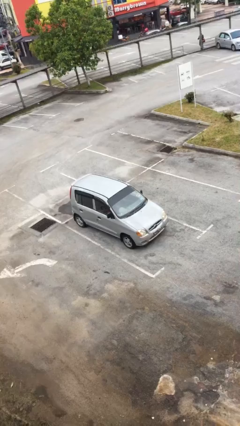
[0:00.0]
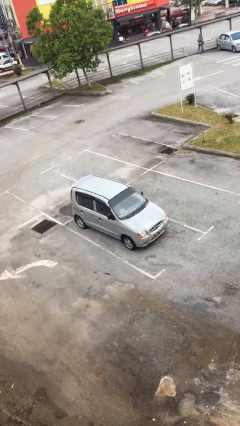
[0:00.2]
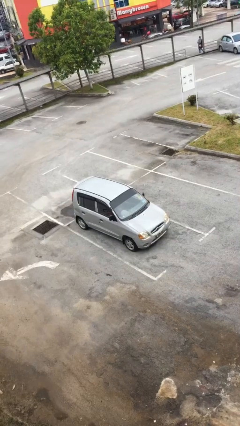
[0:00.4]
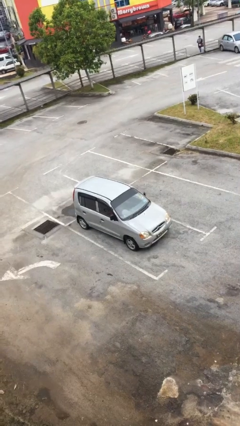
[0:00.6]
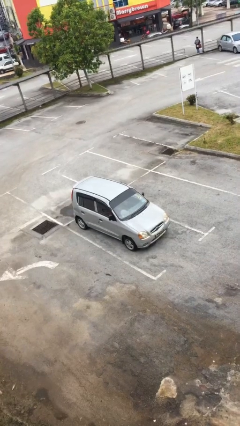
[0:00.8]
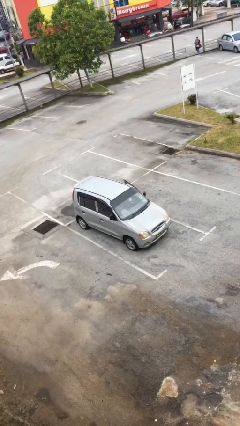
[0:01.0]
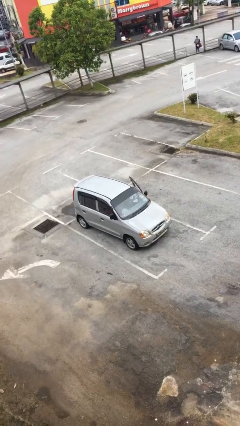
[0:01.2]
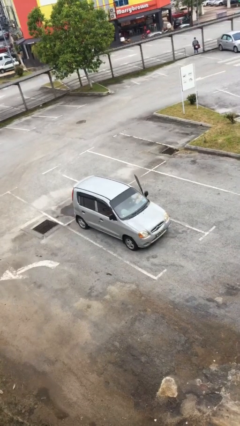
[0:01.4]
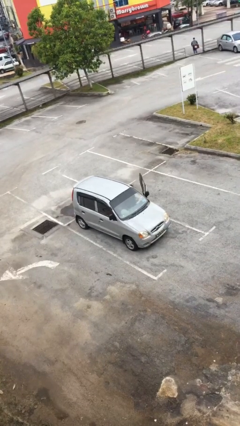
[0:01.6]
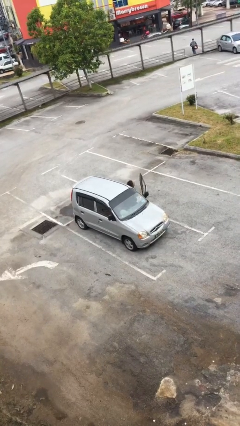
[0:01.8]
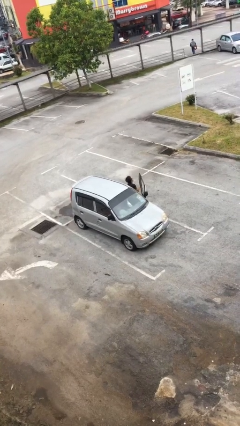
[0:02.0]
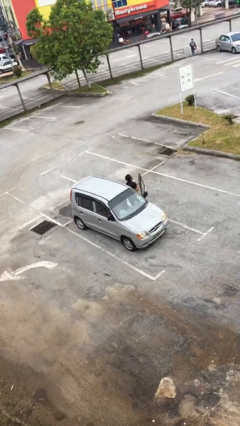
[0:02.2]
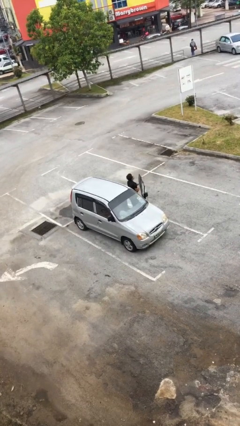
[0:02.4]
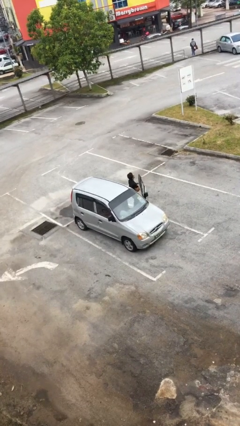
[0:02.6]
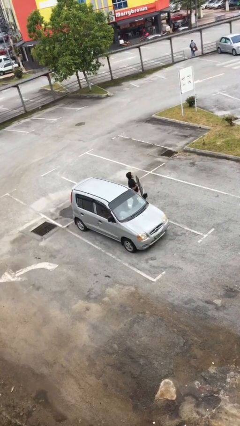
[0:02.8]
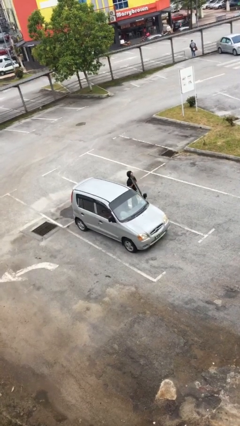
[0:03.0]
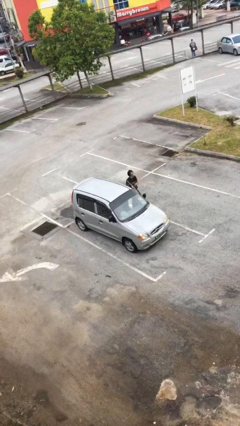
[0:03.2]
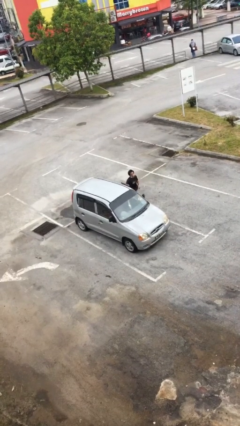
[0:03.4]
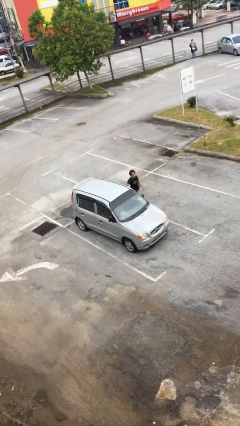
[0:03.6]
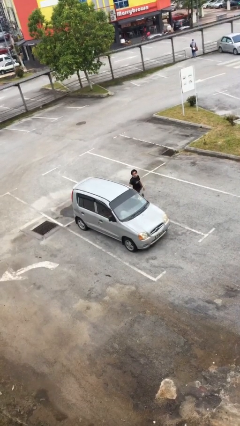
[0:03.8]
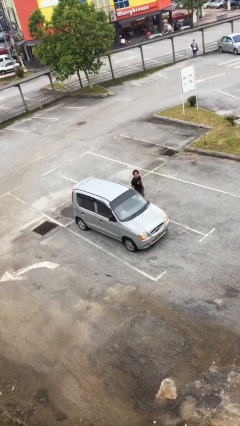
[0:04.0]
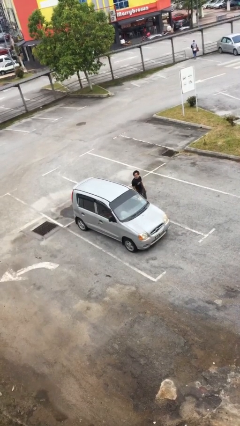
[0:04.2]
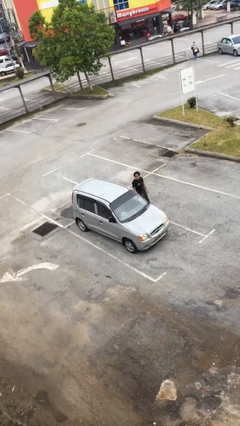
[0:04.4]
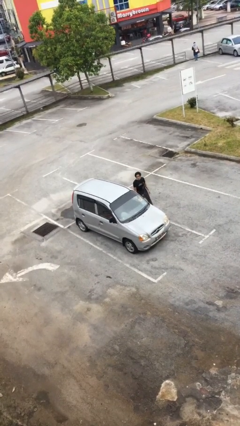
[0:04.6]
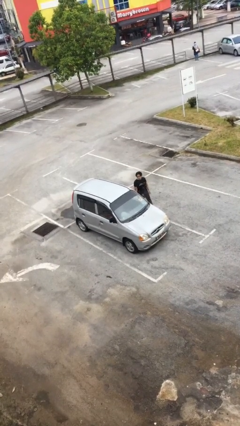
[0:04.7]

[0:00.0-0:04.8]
car drops off person

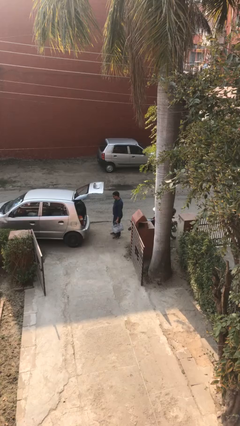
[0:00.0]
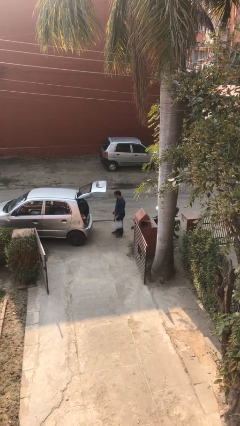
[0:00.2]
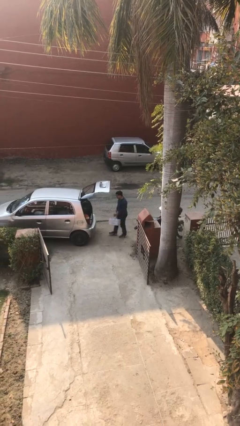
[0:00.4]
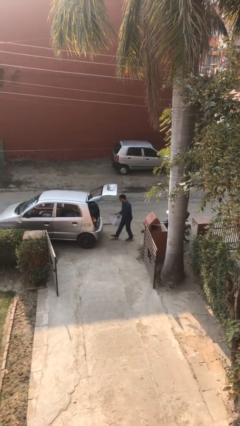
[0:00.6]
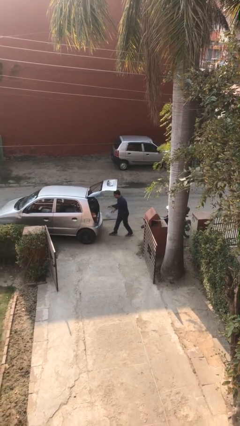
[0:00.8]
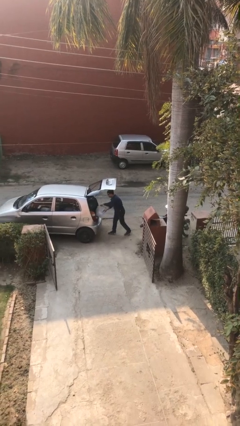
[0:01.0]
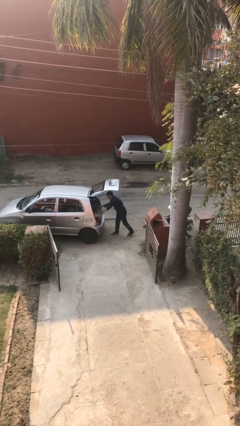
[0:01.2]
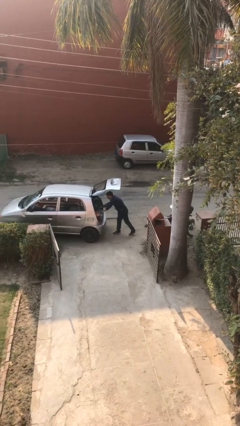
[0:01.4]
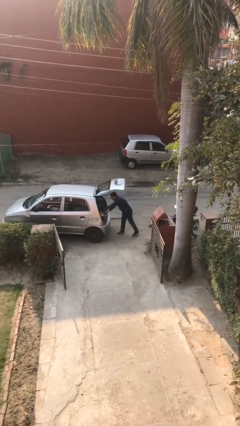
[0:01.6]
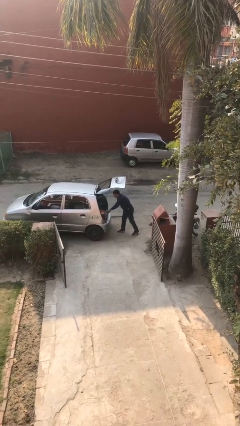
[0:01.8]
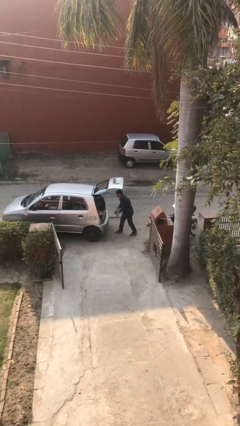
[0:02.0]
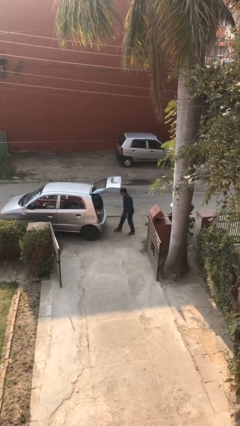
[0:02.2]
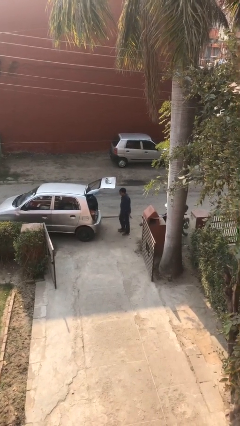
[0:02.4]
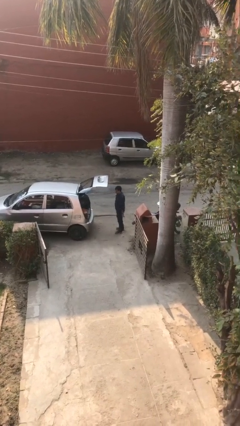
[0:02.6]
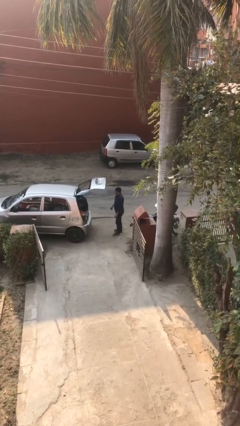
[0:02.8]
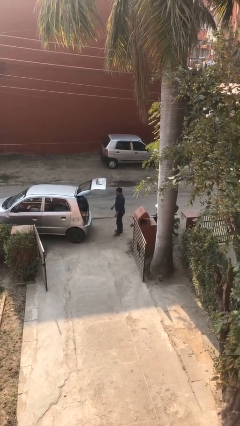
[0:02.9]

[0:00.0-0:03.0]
person loads car

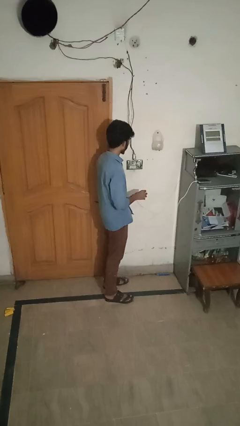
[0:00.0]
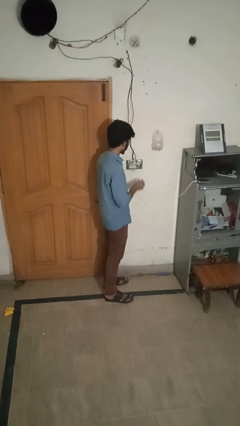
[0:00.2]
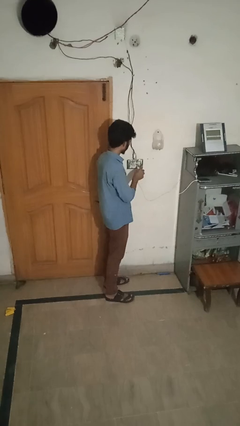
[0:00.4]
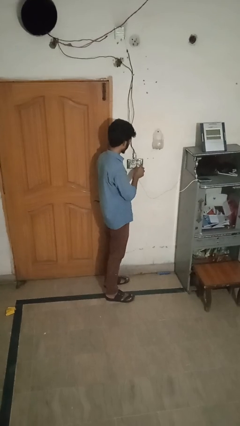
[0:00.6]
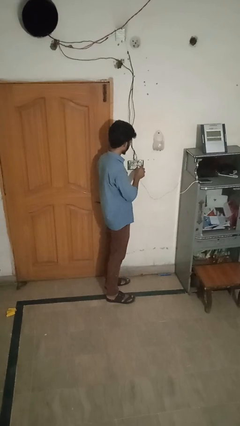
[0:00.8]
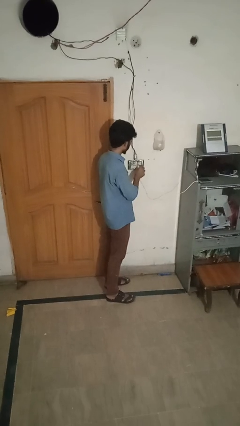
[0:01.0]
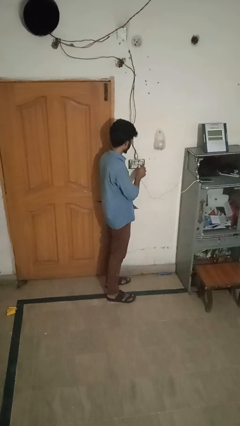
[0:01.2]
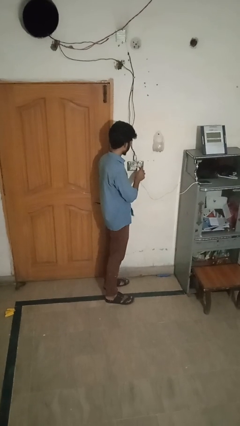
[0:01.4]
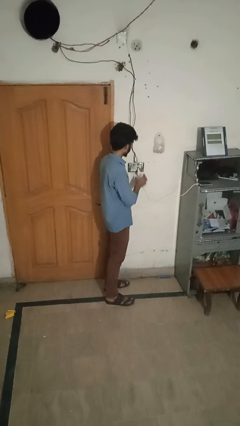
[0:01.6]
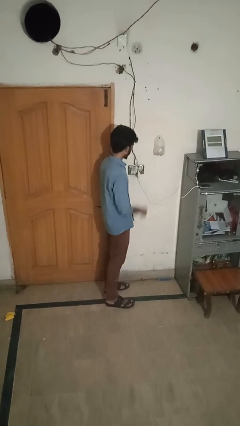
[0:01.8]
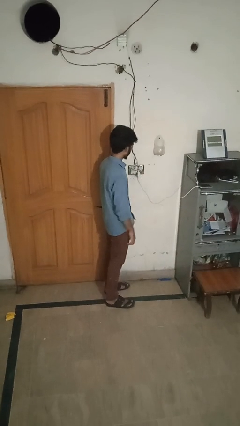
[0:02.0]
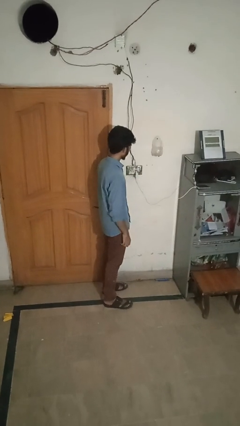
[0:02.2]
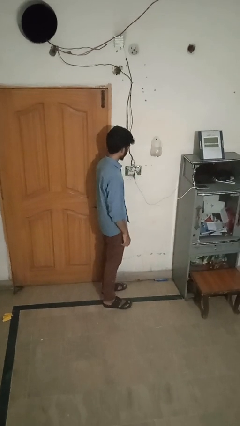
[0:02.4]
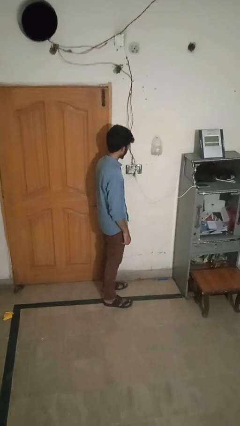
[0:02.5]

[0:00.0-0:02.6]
person plugs into electrical socket

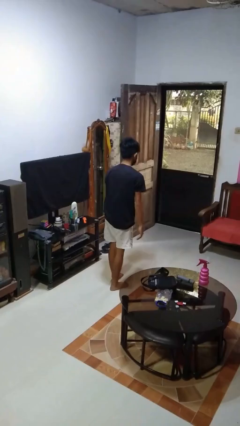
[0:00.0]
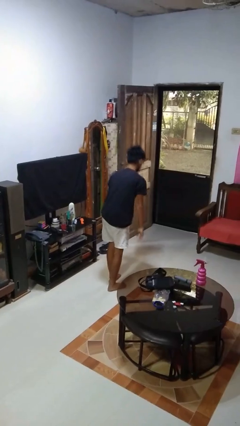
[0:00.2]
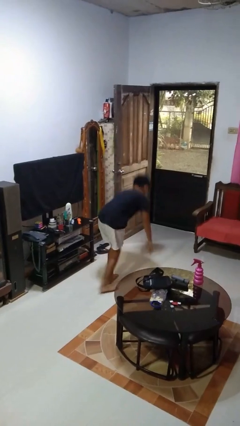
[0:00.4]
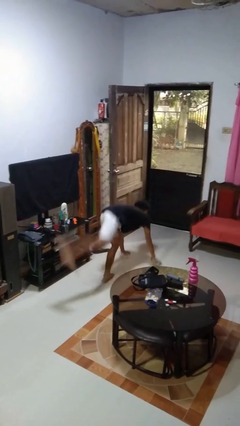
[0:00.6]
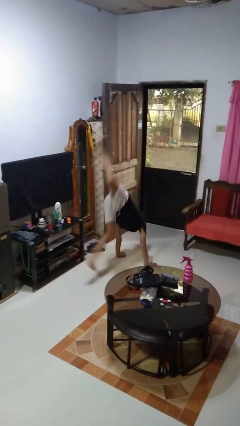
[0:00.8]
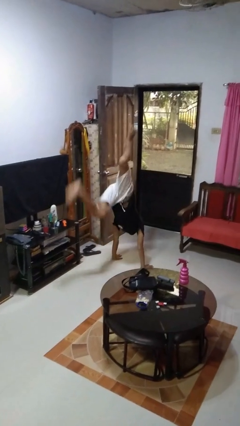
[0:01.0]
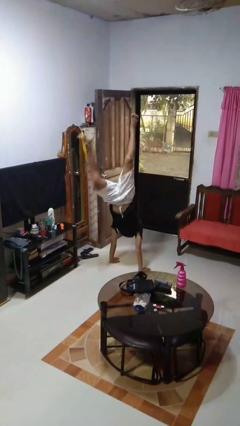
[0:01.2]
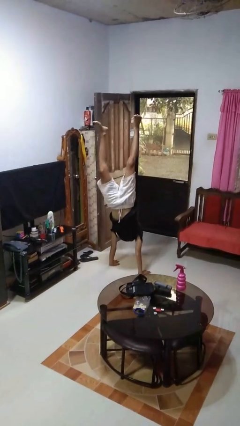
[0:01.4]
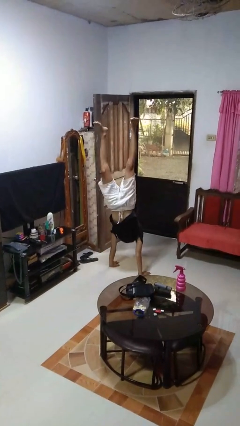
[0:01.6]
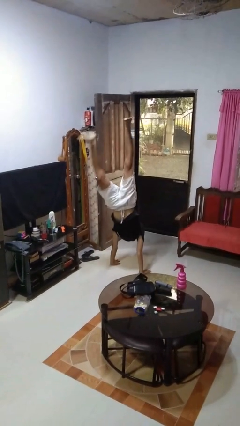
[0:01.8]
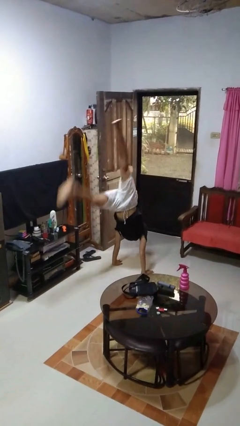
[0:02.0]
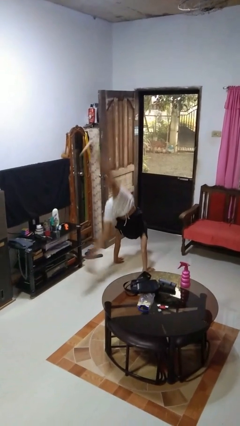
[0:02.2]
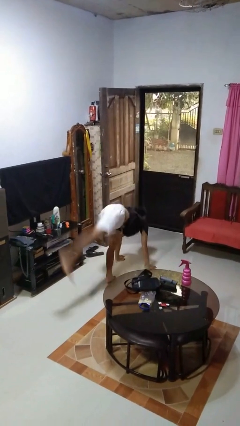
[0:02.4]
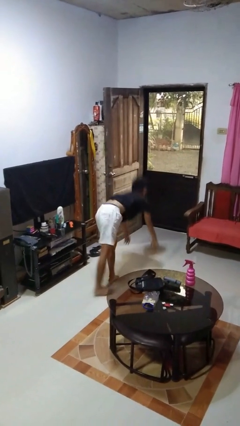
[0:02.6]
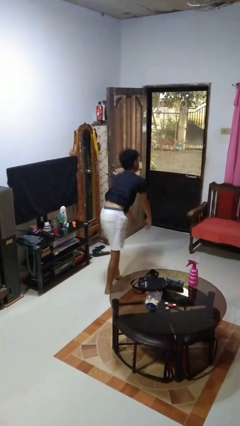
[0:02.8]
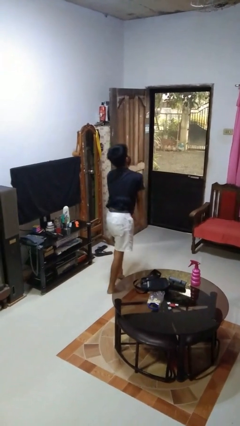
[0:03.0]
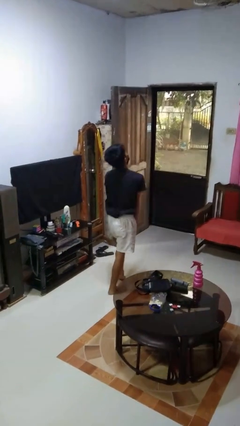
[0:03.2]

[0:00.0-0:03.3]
person handstand

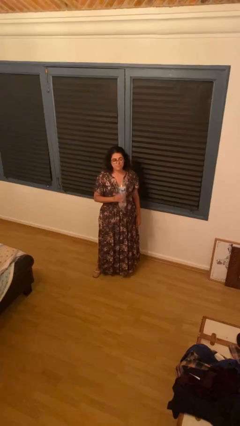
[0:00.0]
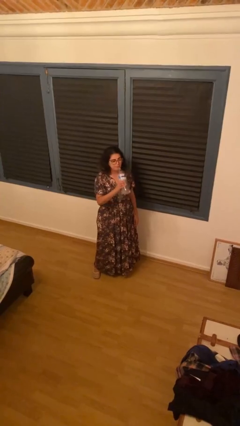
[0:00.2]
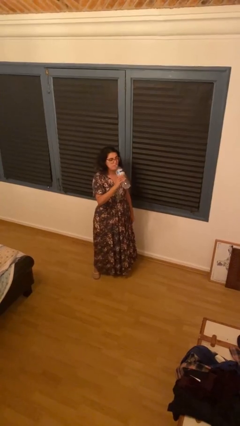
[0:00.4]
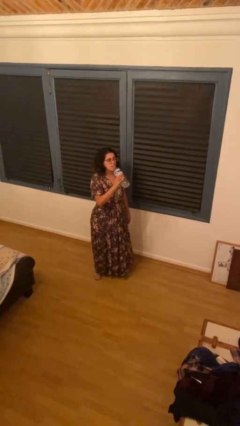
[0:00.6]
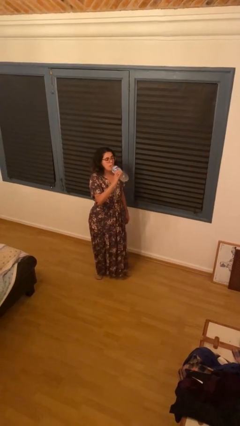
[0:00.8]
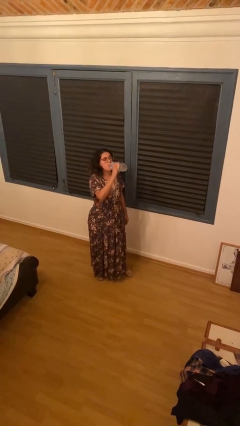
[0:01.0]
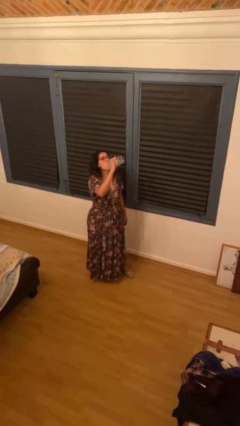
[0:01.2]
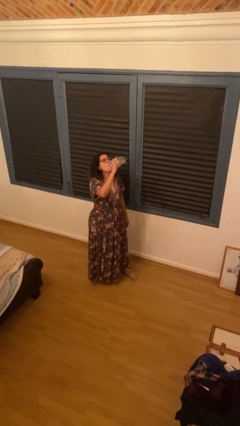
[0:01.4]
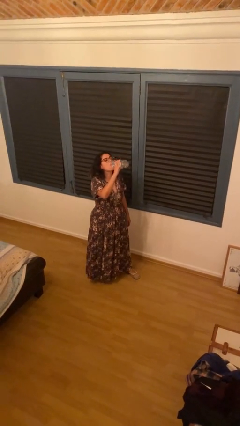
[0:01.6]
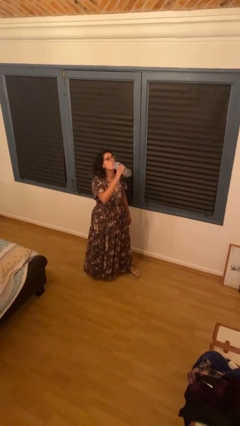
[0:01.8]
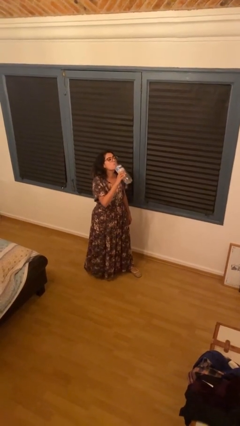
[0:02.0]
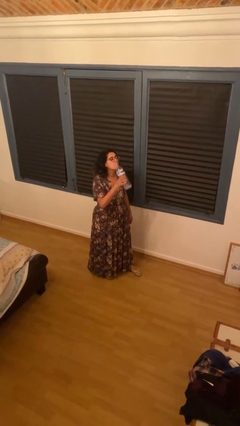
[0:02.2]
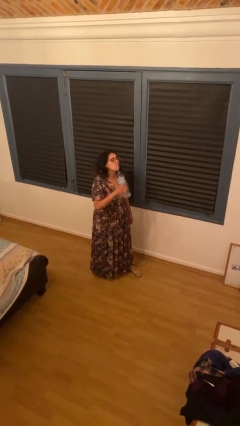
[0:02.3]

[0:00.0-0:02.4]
person drinks from bottle

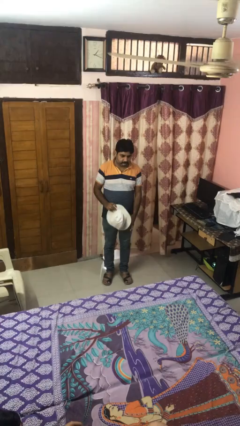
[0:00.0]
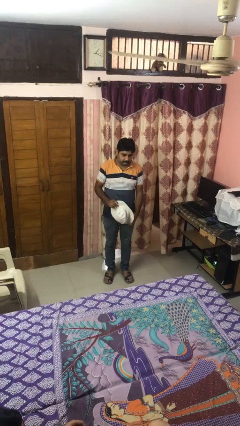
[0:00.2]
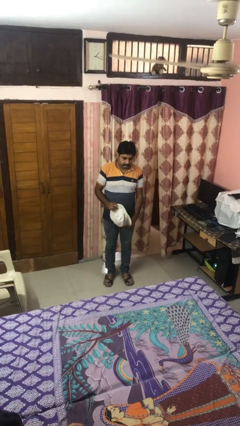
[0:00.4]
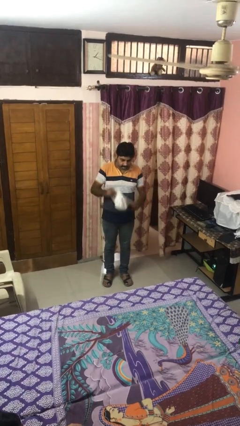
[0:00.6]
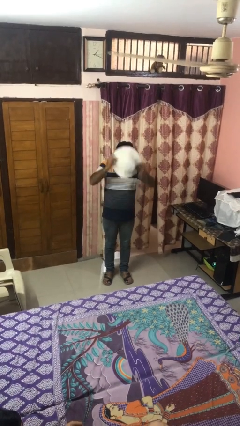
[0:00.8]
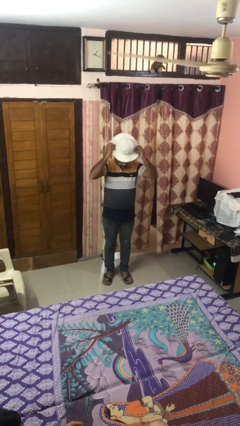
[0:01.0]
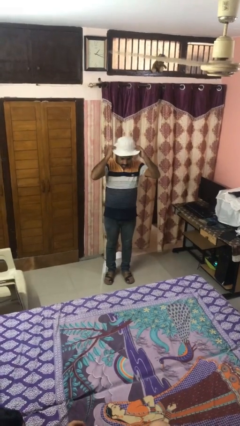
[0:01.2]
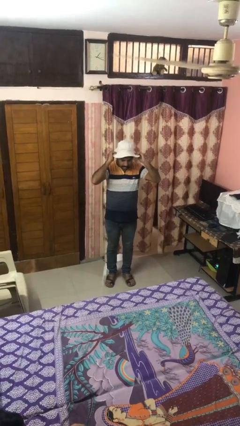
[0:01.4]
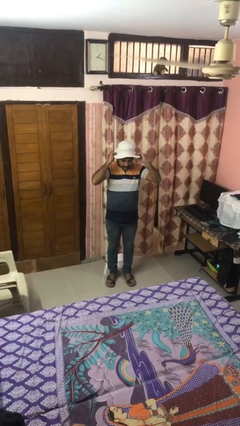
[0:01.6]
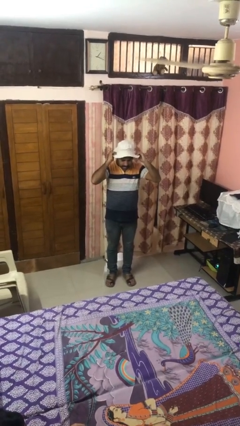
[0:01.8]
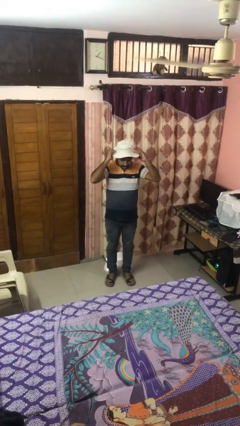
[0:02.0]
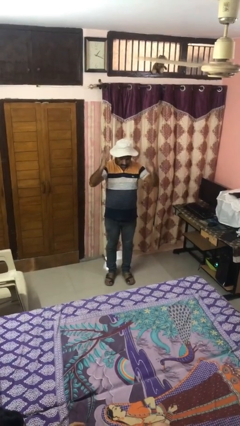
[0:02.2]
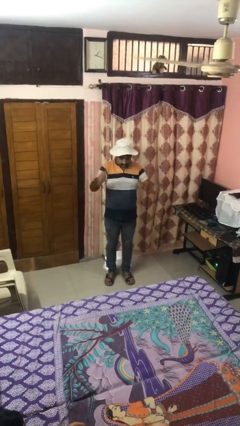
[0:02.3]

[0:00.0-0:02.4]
person puts on hat
